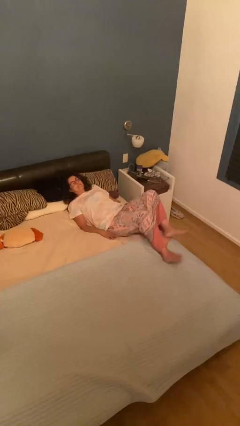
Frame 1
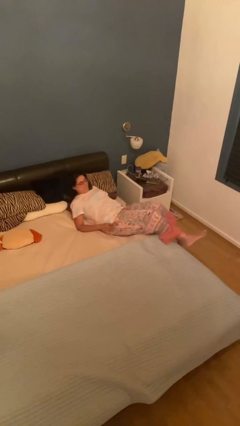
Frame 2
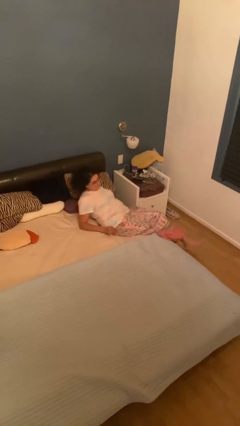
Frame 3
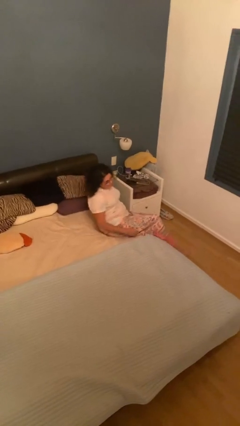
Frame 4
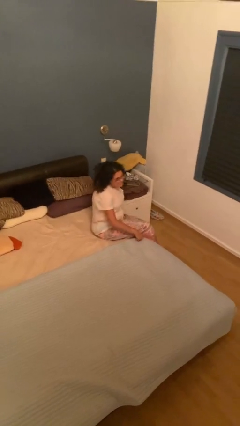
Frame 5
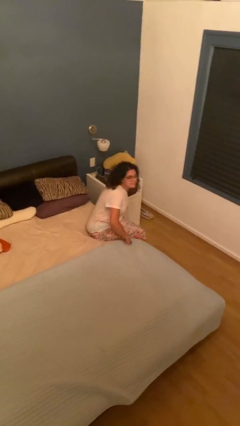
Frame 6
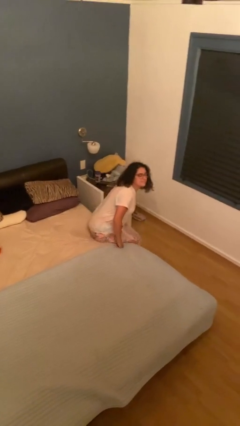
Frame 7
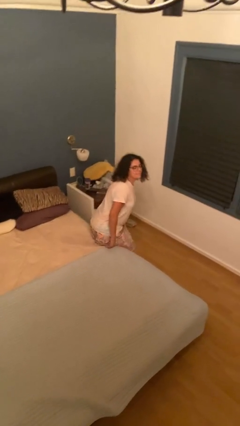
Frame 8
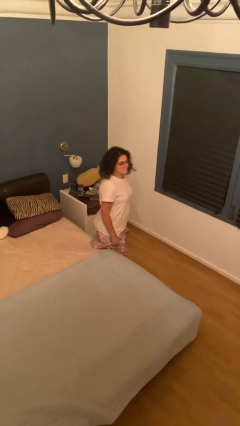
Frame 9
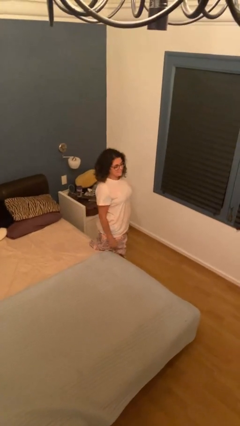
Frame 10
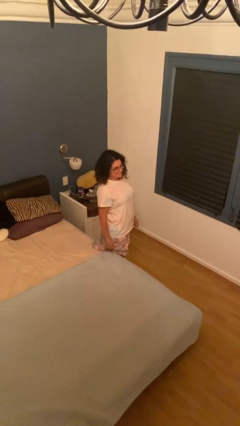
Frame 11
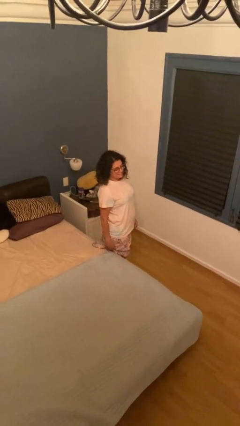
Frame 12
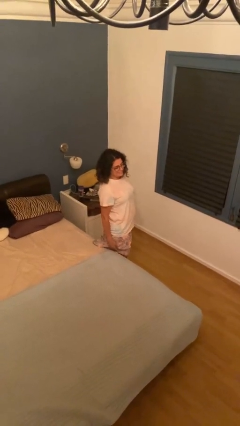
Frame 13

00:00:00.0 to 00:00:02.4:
person stands up

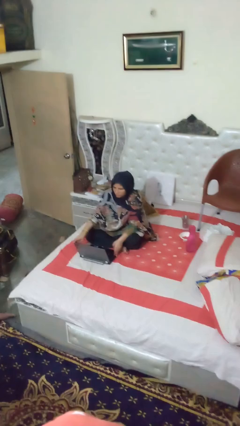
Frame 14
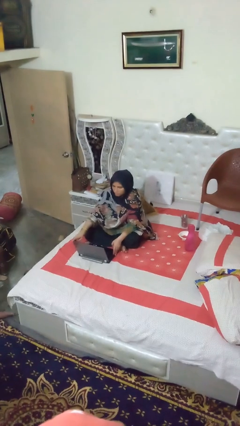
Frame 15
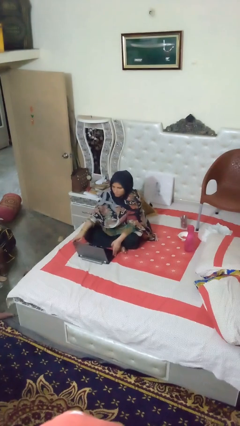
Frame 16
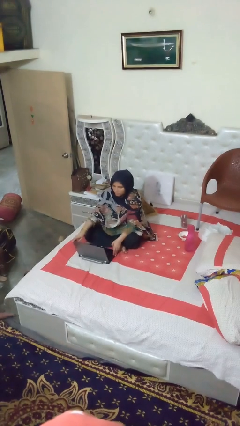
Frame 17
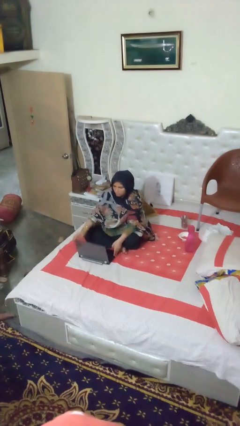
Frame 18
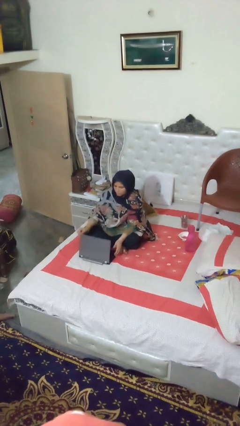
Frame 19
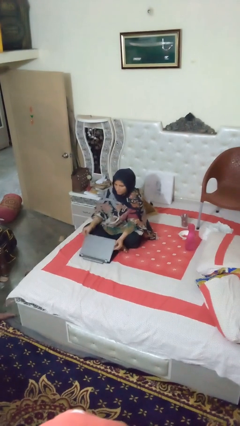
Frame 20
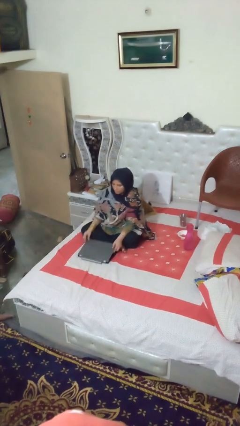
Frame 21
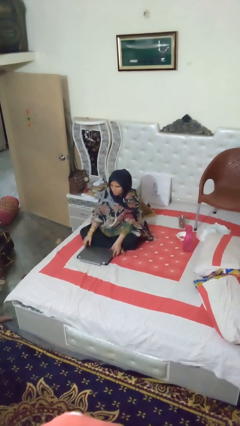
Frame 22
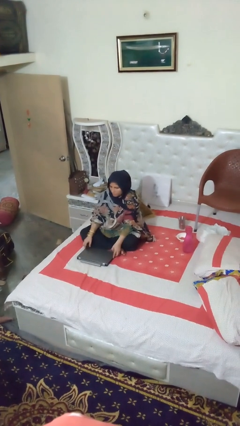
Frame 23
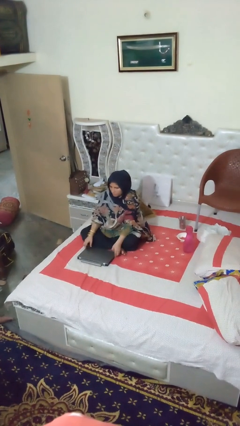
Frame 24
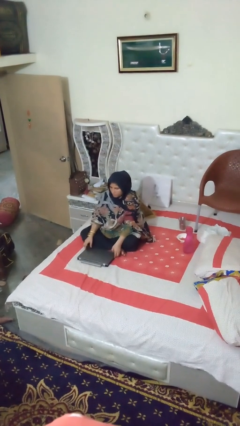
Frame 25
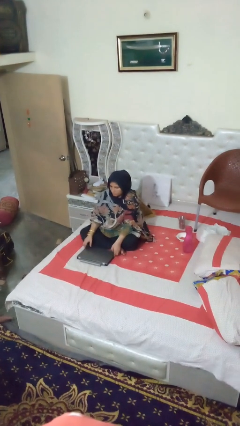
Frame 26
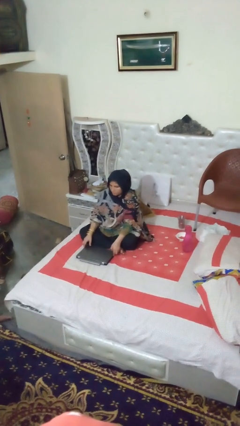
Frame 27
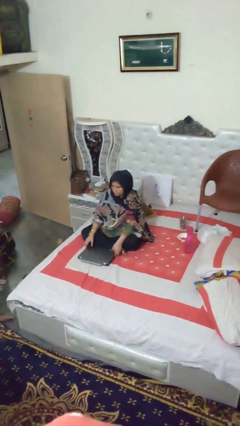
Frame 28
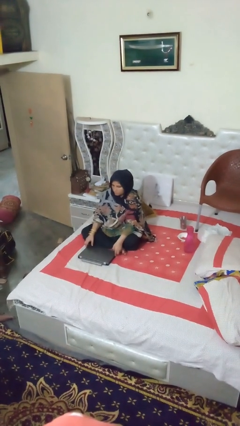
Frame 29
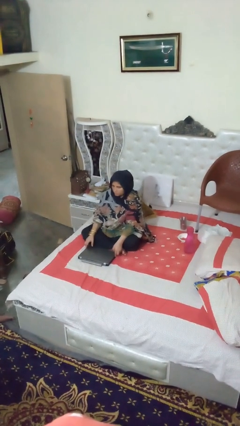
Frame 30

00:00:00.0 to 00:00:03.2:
person closes laptop

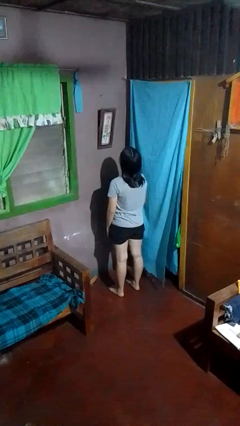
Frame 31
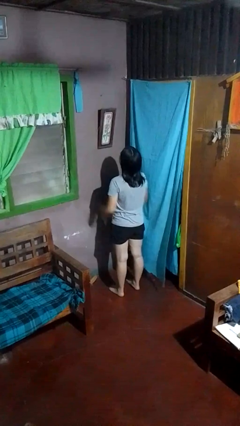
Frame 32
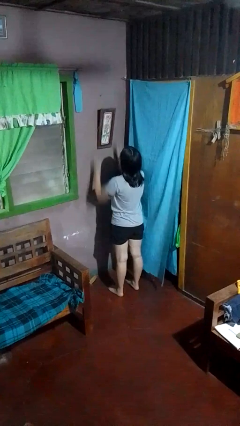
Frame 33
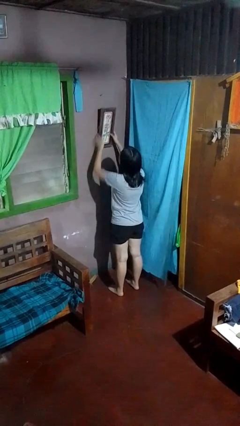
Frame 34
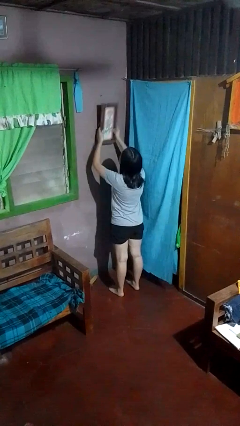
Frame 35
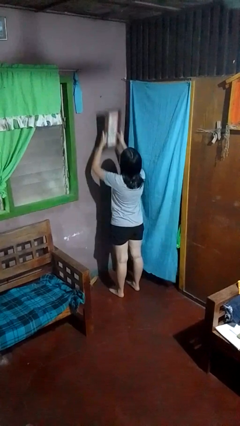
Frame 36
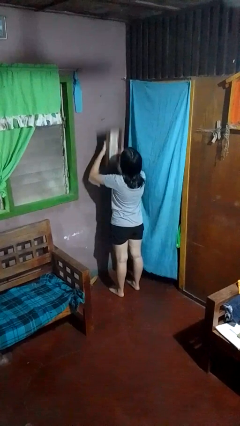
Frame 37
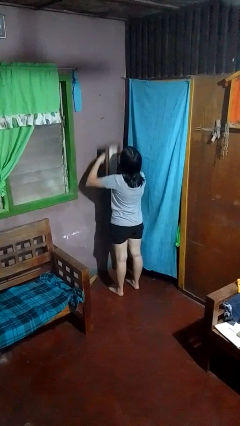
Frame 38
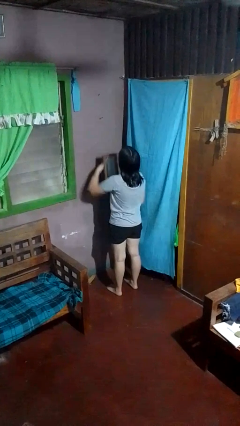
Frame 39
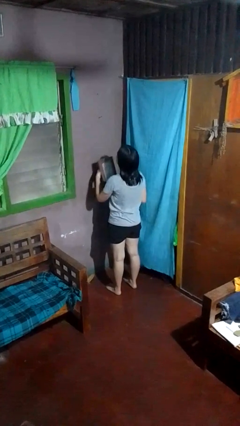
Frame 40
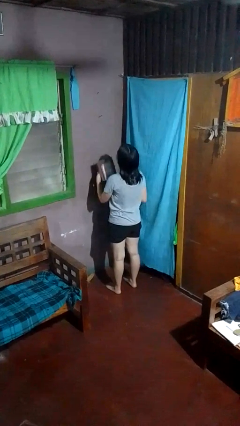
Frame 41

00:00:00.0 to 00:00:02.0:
person takes down picture frame

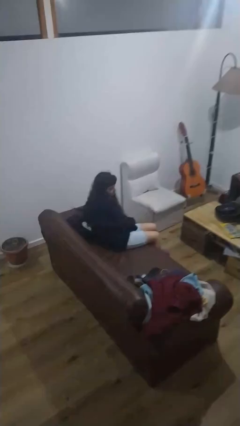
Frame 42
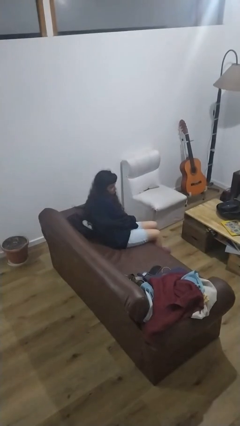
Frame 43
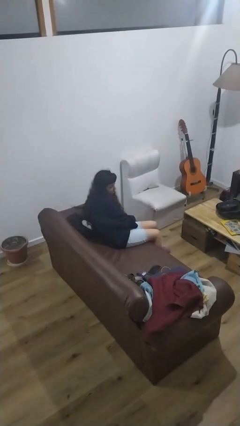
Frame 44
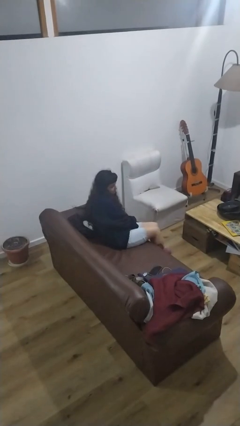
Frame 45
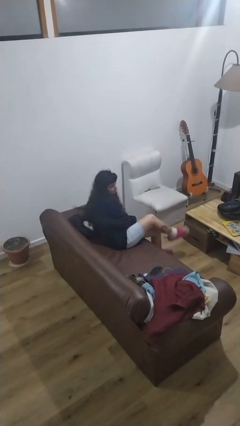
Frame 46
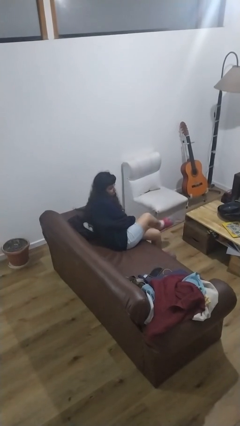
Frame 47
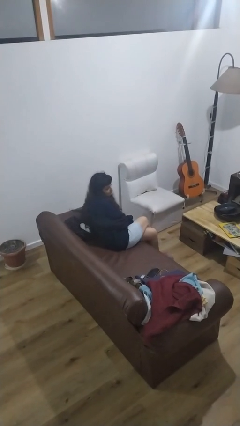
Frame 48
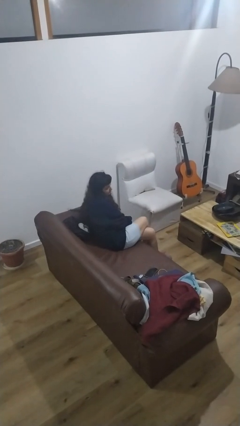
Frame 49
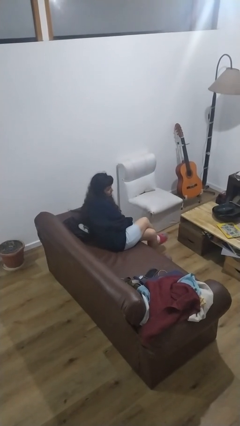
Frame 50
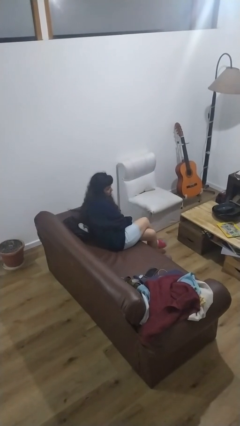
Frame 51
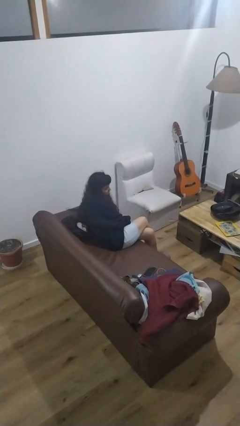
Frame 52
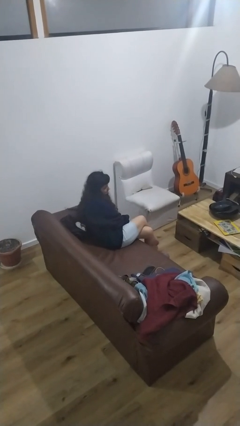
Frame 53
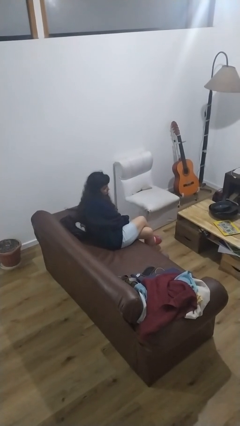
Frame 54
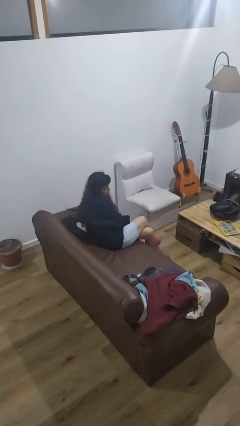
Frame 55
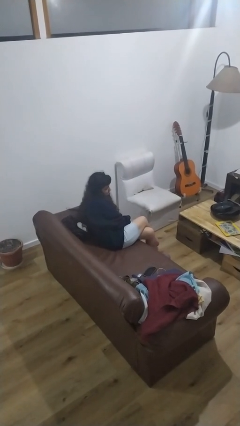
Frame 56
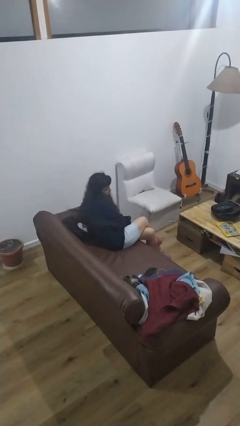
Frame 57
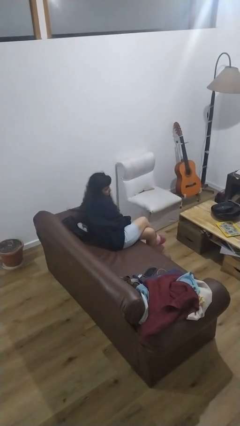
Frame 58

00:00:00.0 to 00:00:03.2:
person crosses legs

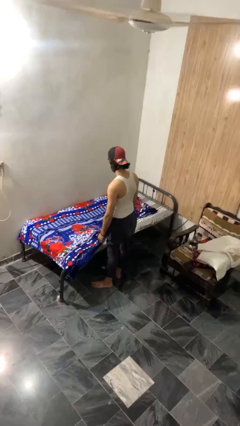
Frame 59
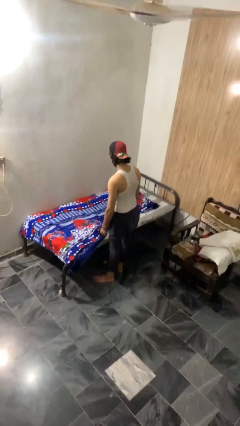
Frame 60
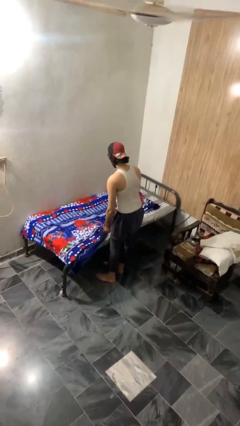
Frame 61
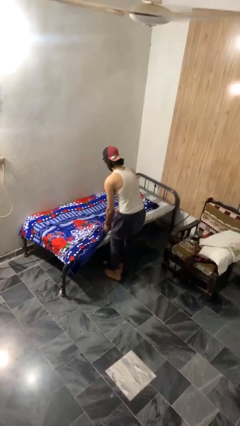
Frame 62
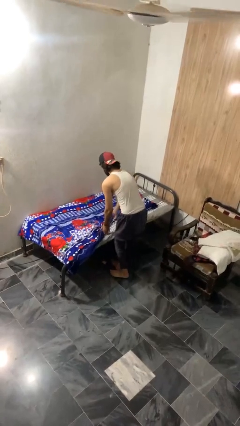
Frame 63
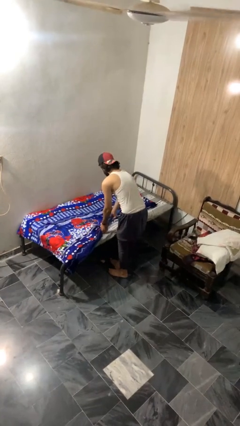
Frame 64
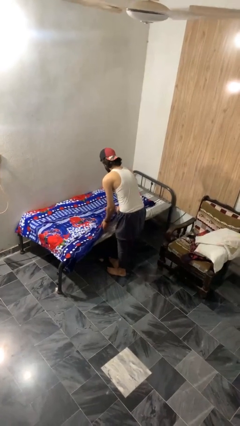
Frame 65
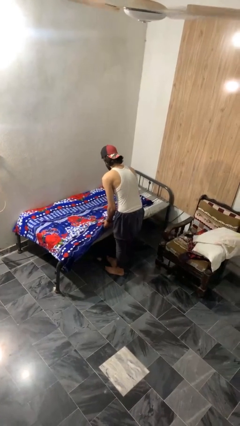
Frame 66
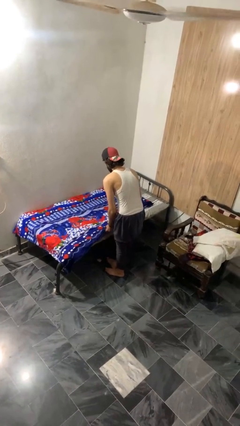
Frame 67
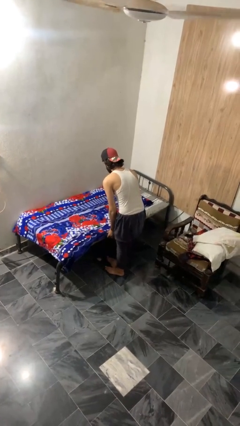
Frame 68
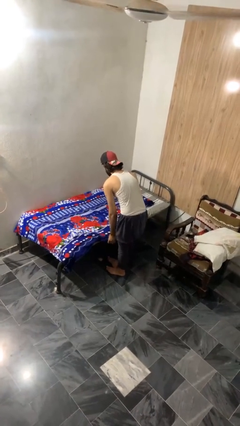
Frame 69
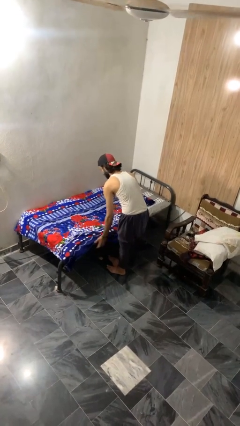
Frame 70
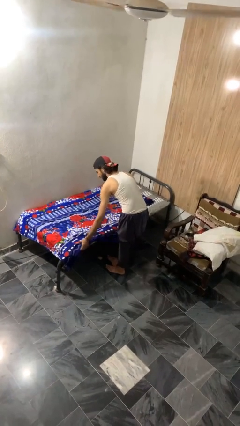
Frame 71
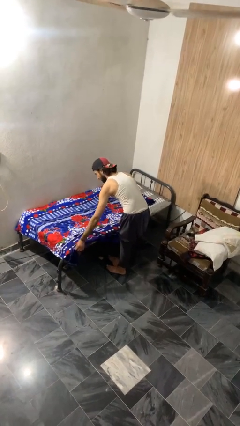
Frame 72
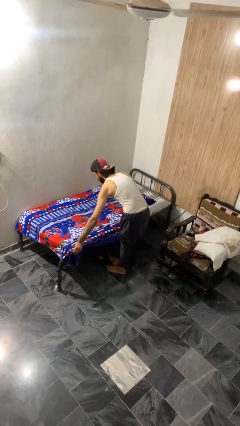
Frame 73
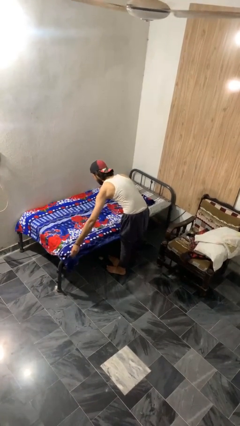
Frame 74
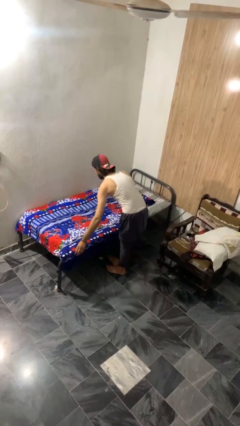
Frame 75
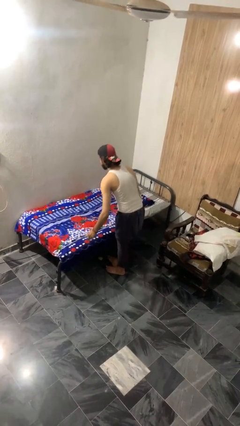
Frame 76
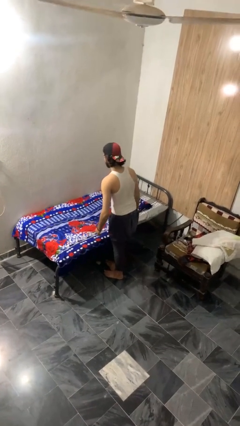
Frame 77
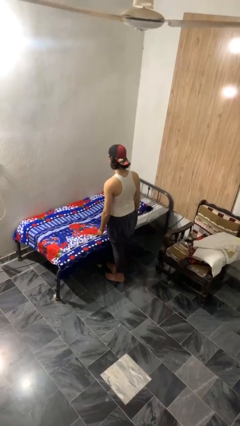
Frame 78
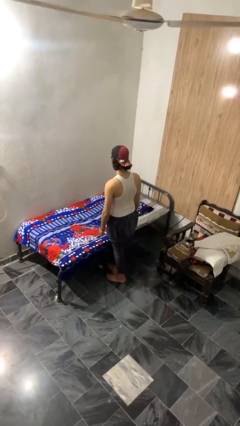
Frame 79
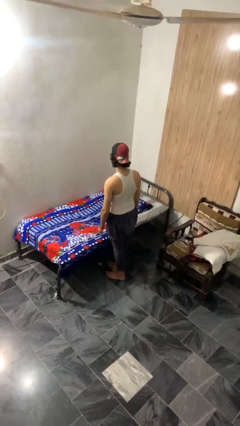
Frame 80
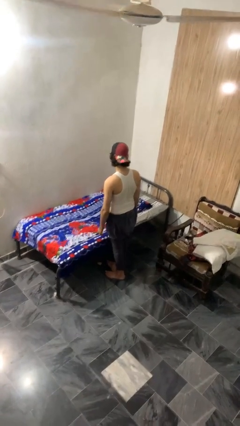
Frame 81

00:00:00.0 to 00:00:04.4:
person makes bed

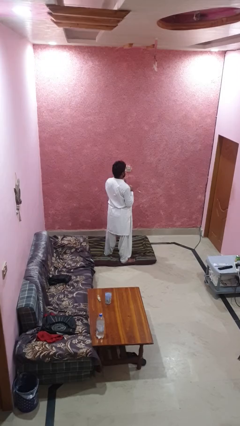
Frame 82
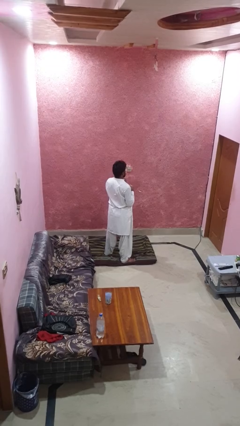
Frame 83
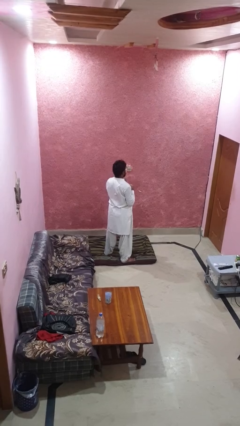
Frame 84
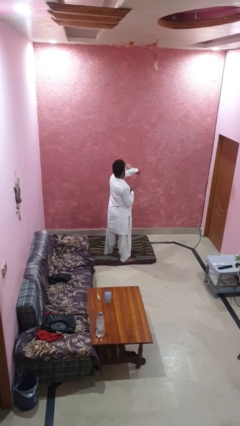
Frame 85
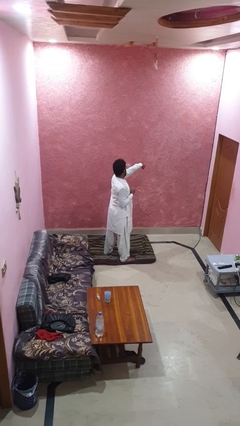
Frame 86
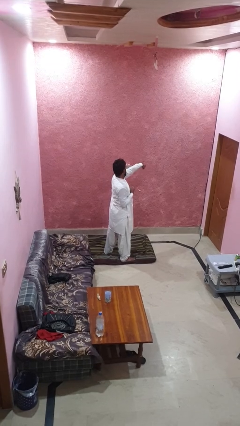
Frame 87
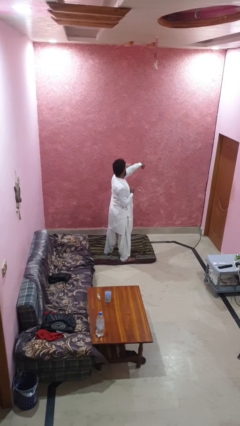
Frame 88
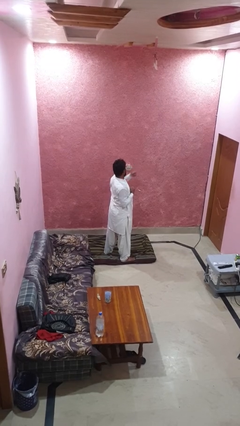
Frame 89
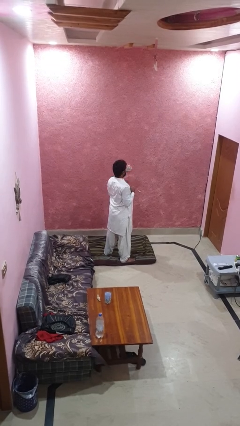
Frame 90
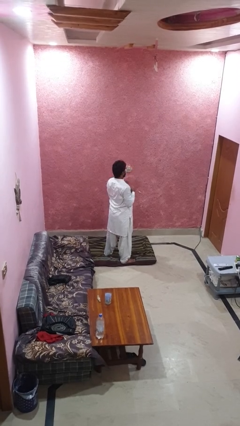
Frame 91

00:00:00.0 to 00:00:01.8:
person punches

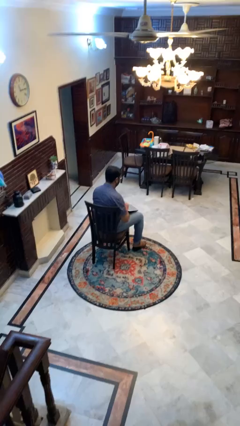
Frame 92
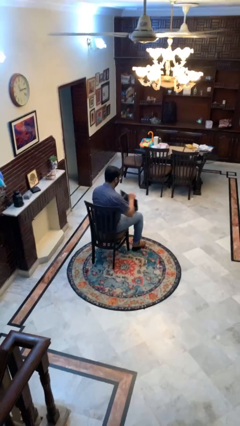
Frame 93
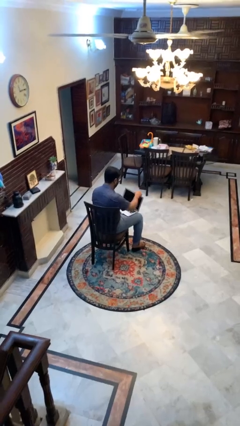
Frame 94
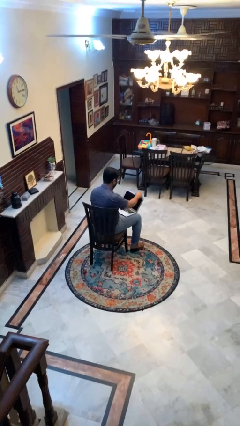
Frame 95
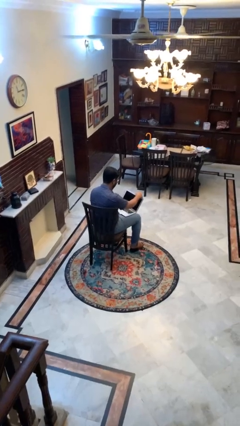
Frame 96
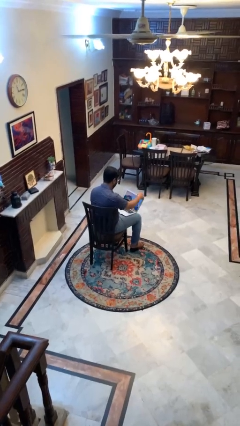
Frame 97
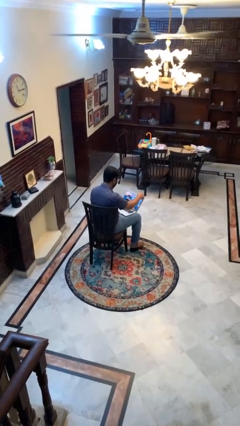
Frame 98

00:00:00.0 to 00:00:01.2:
person opens laptop
